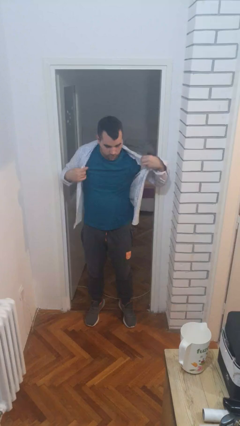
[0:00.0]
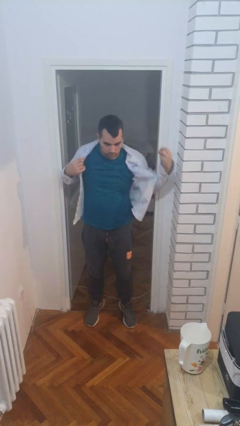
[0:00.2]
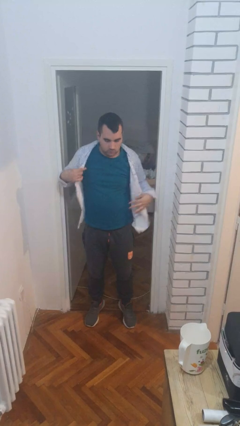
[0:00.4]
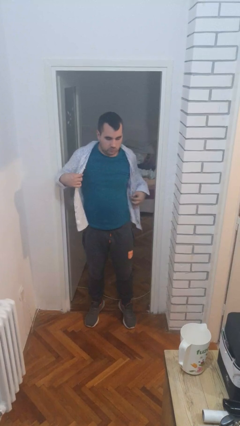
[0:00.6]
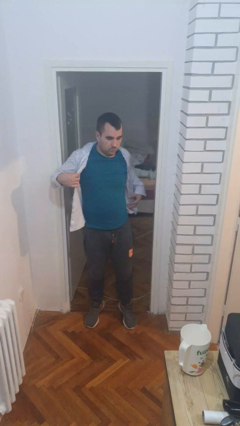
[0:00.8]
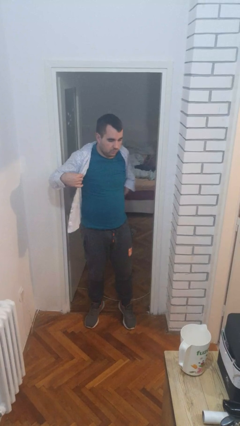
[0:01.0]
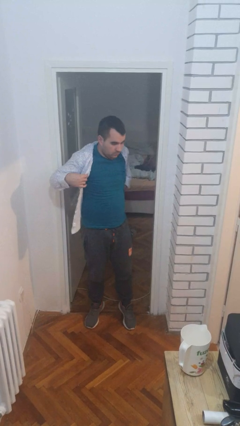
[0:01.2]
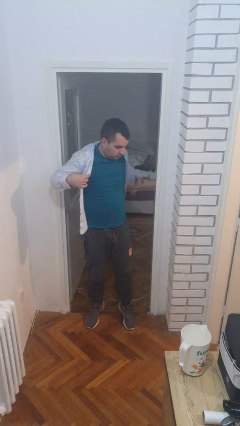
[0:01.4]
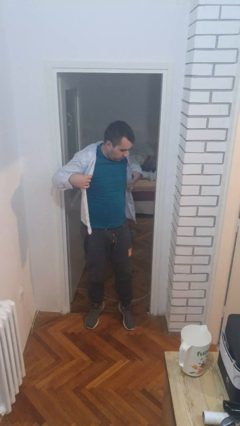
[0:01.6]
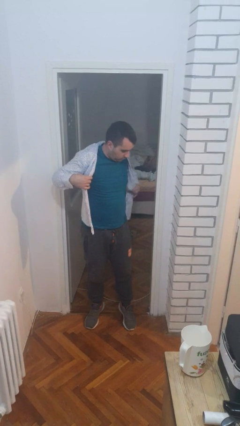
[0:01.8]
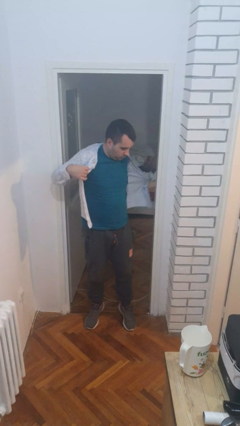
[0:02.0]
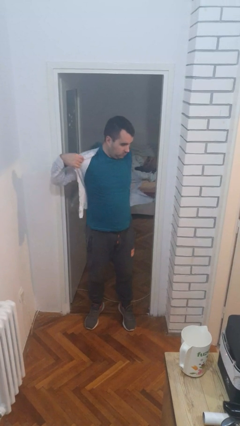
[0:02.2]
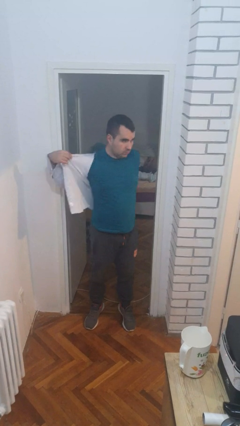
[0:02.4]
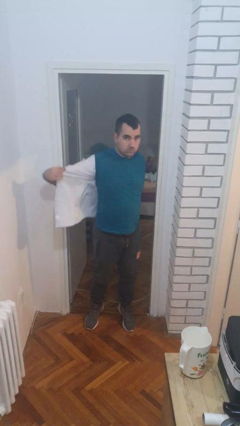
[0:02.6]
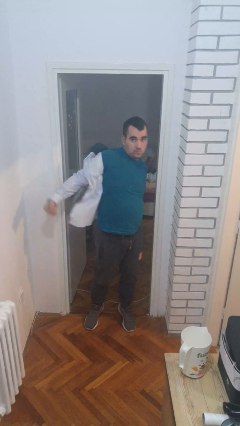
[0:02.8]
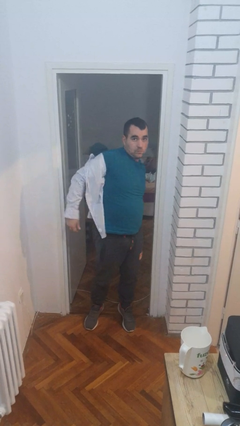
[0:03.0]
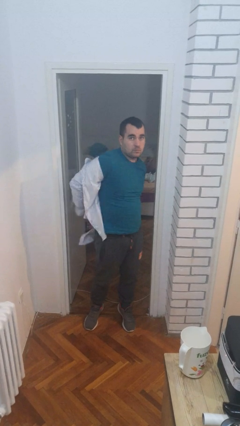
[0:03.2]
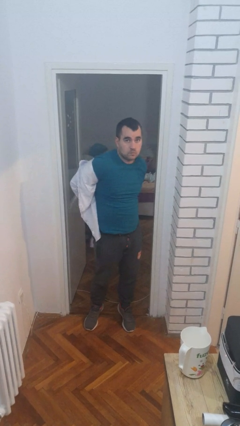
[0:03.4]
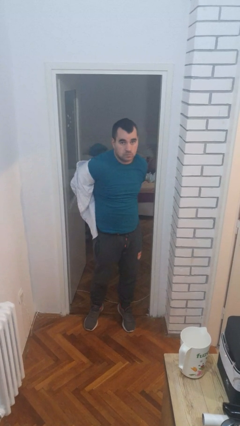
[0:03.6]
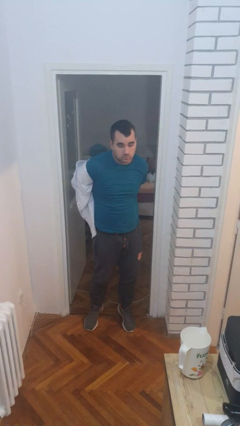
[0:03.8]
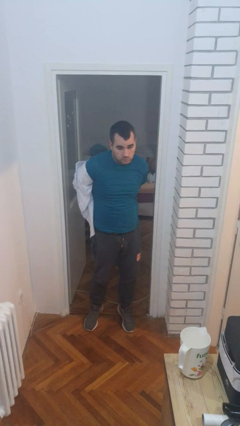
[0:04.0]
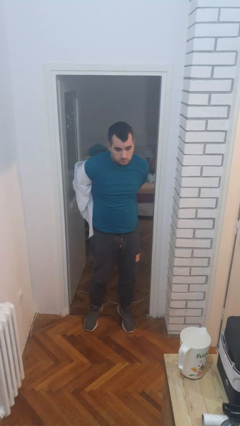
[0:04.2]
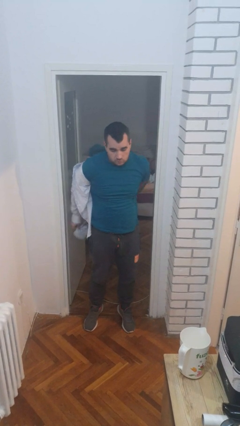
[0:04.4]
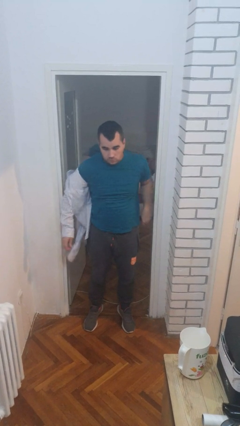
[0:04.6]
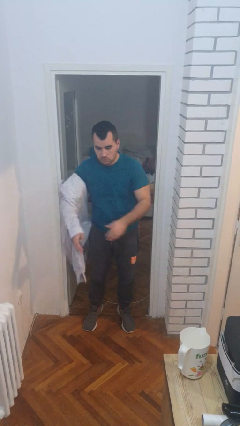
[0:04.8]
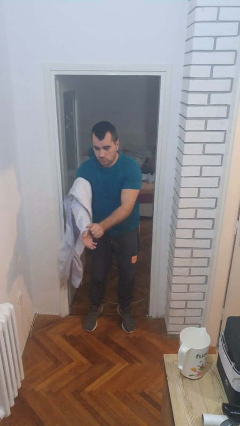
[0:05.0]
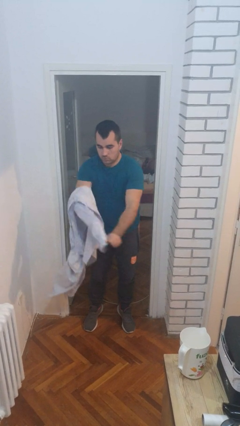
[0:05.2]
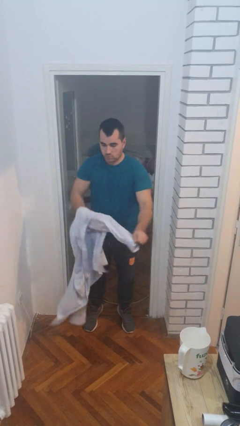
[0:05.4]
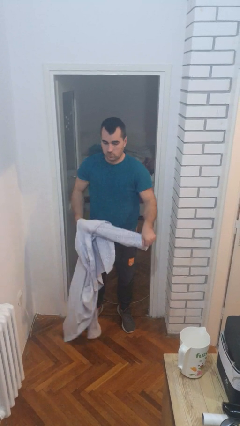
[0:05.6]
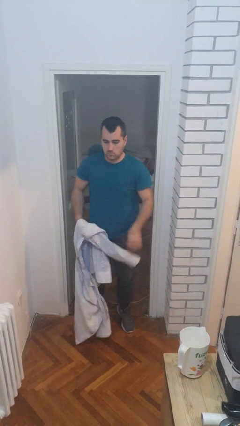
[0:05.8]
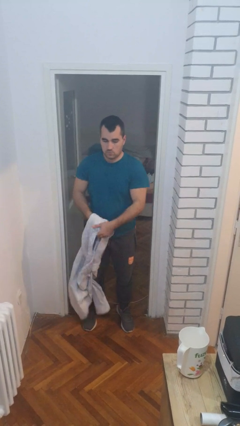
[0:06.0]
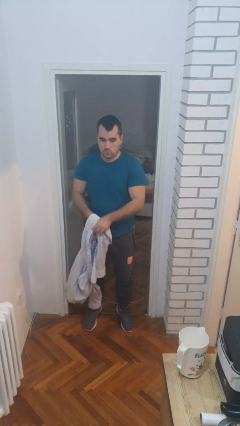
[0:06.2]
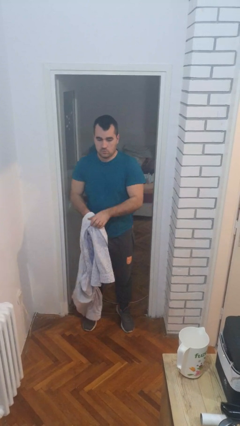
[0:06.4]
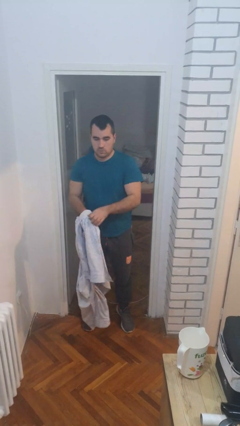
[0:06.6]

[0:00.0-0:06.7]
person takes off shirt

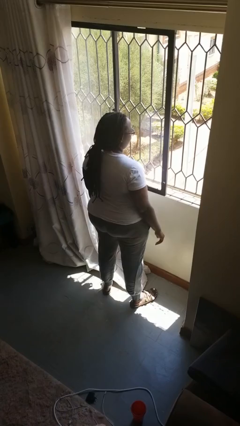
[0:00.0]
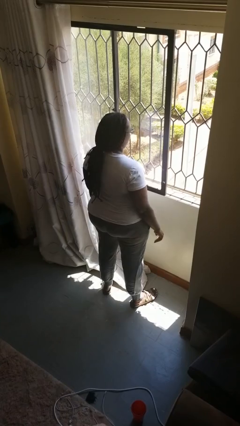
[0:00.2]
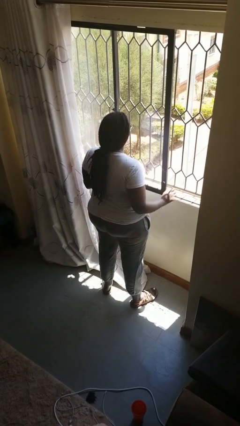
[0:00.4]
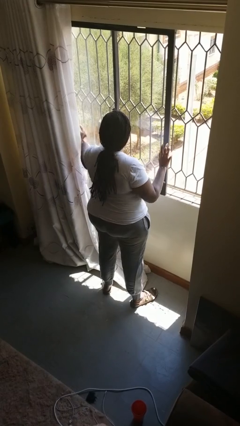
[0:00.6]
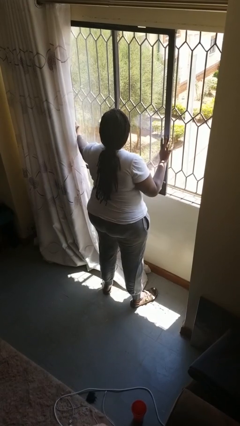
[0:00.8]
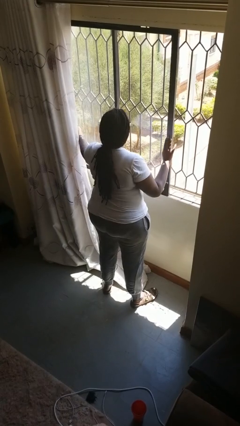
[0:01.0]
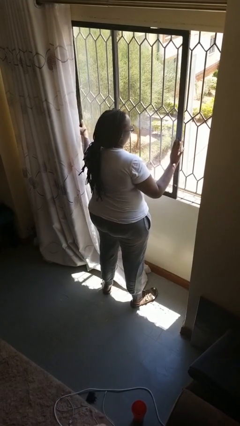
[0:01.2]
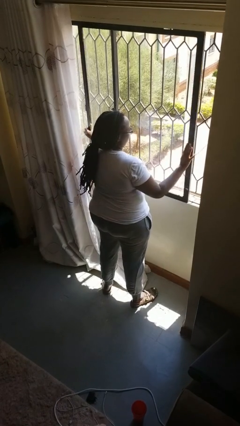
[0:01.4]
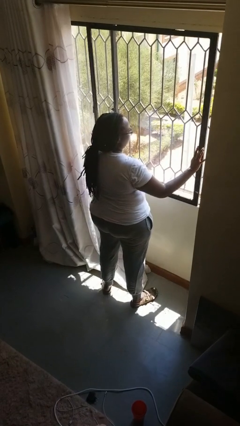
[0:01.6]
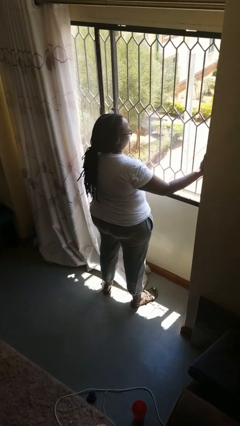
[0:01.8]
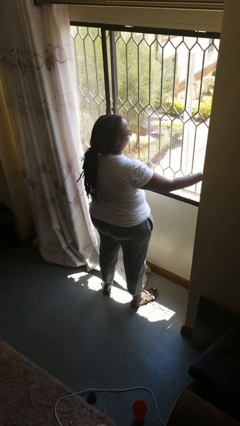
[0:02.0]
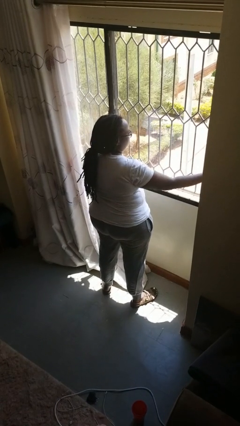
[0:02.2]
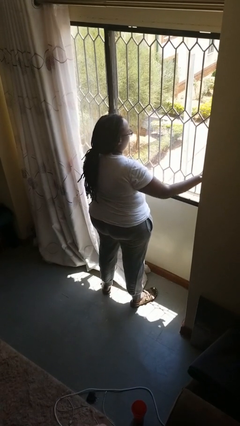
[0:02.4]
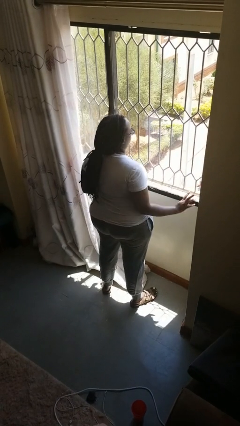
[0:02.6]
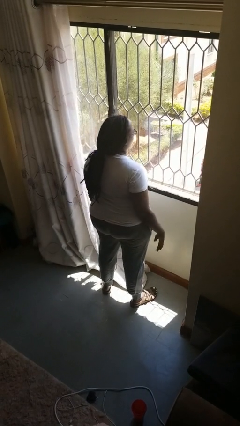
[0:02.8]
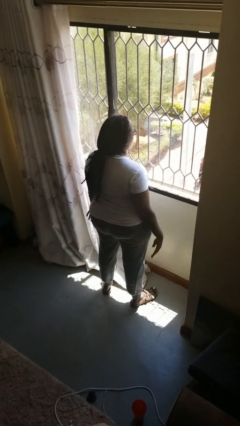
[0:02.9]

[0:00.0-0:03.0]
person closes home window

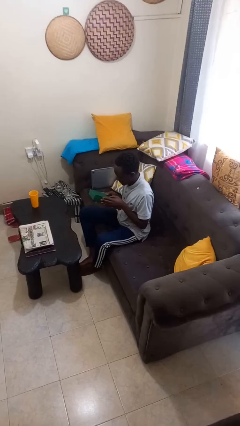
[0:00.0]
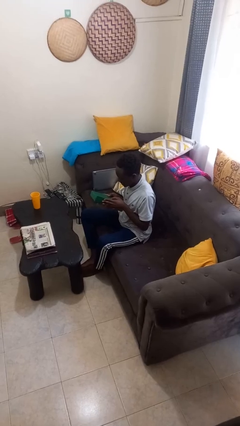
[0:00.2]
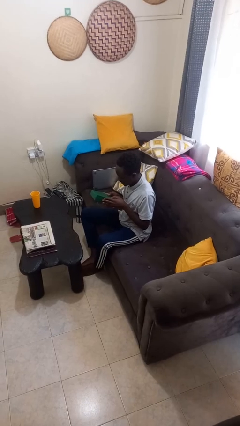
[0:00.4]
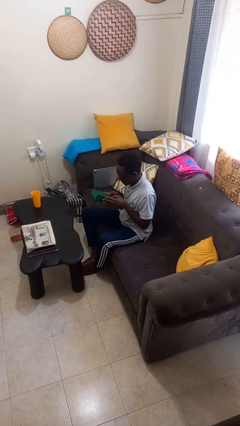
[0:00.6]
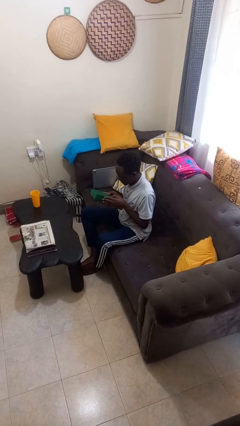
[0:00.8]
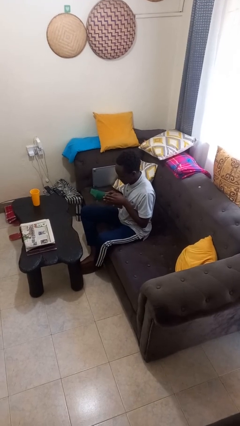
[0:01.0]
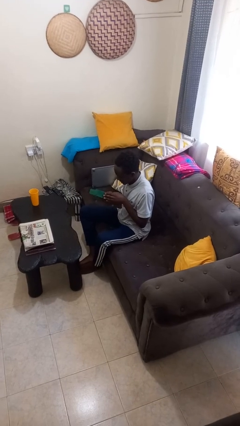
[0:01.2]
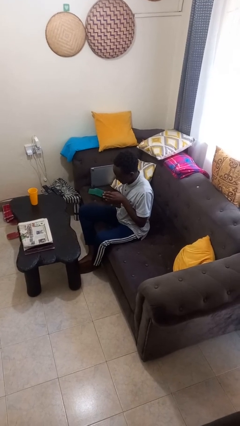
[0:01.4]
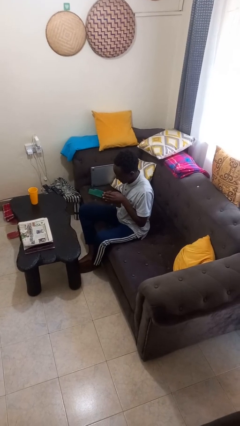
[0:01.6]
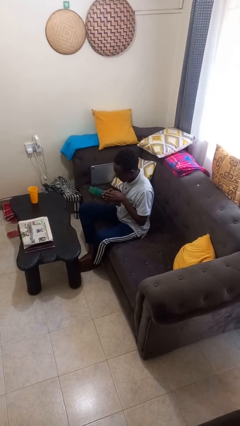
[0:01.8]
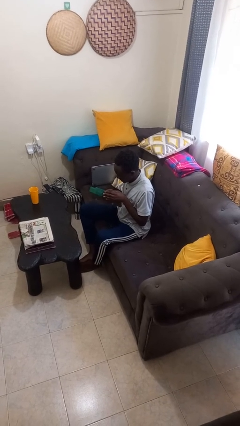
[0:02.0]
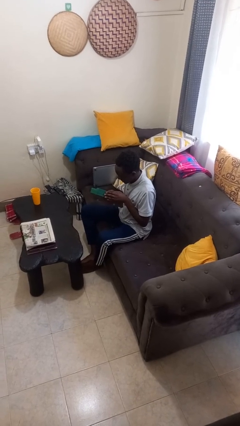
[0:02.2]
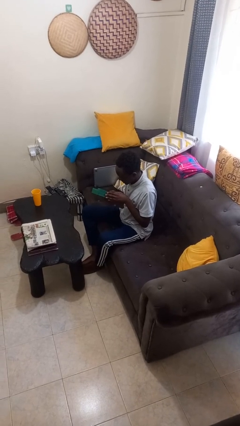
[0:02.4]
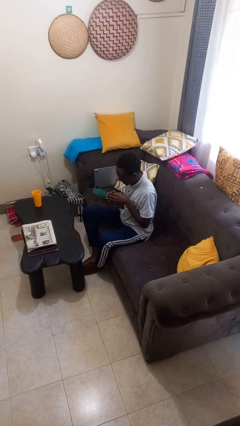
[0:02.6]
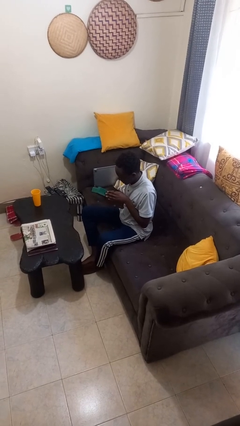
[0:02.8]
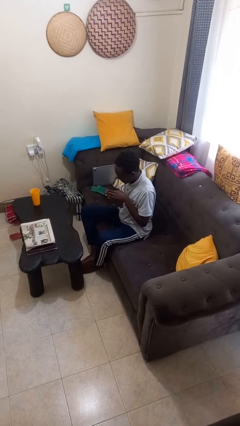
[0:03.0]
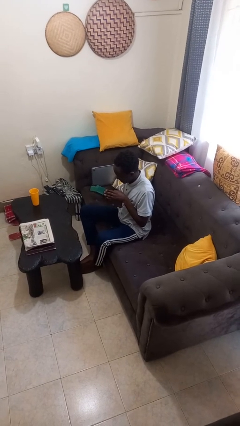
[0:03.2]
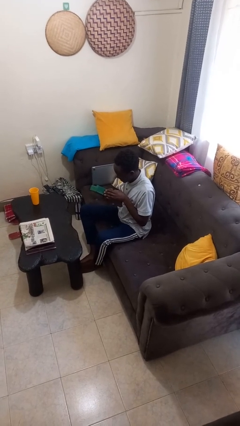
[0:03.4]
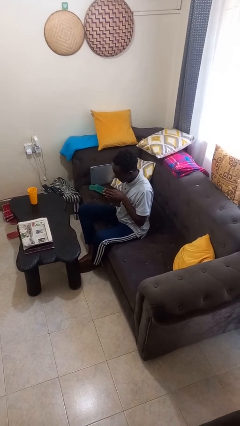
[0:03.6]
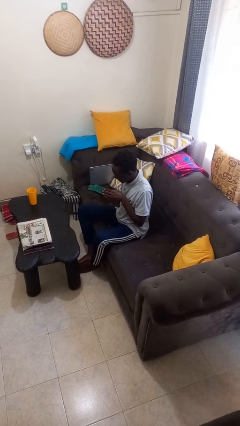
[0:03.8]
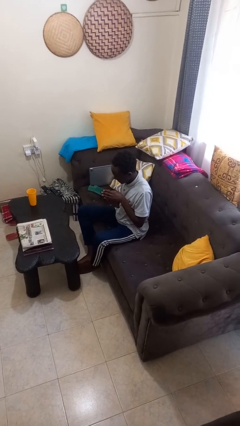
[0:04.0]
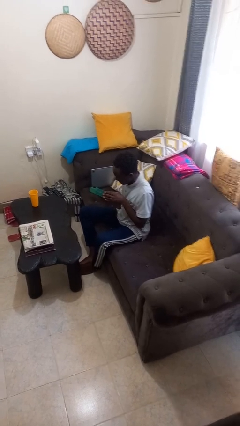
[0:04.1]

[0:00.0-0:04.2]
person interacts with handheld game

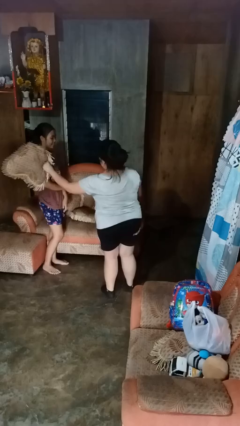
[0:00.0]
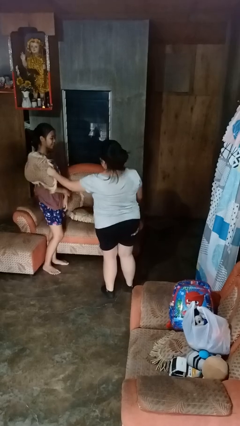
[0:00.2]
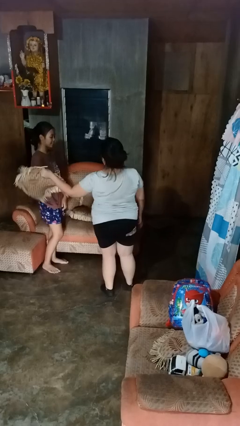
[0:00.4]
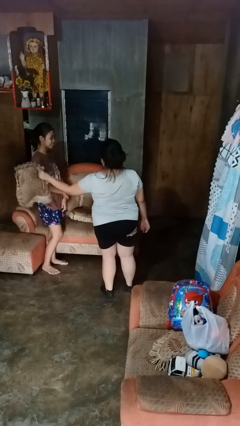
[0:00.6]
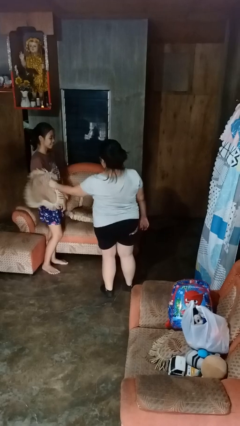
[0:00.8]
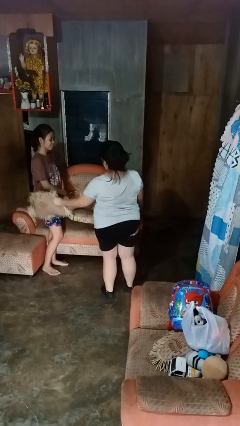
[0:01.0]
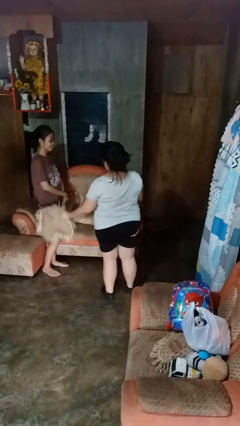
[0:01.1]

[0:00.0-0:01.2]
person hits person with pillow

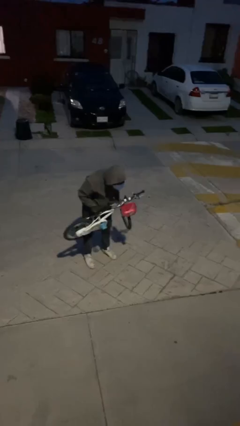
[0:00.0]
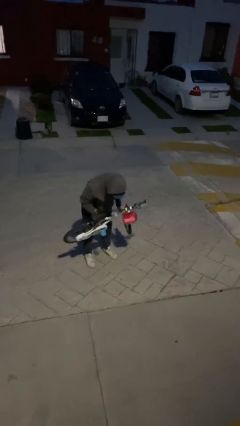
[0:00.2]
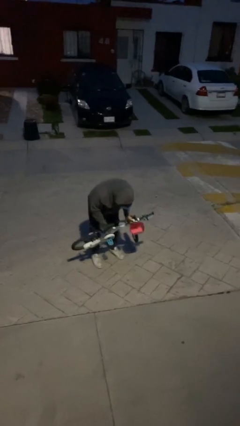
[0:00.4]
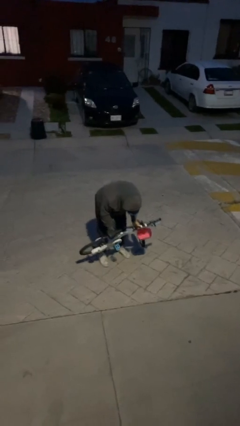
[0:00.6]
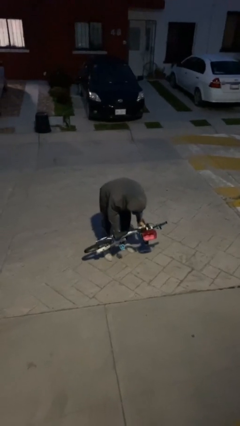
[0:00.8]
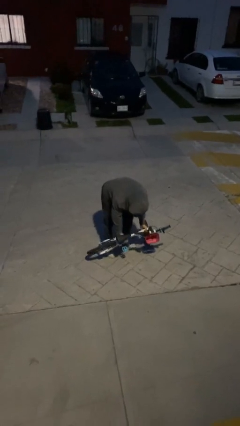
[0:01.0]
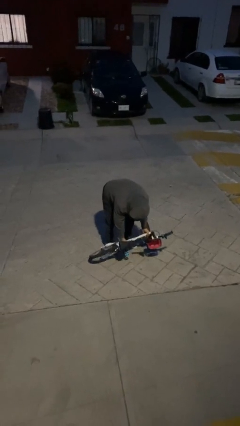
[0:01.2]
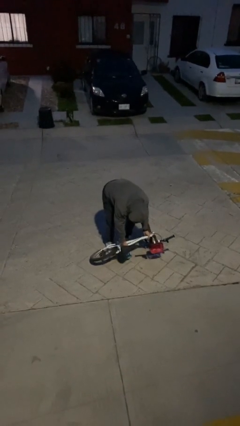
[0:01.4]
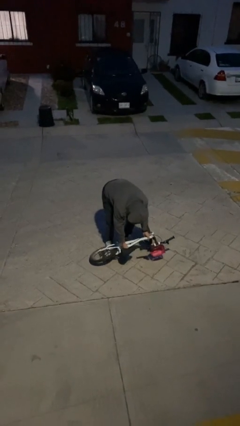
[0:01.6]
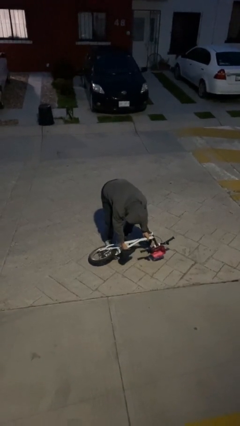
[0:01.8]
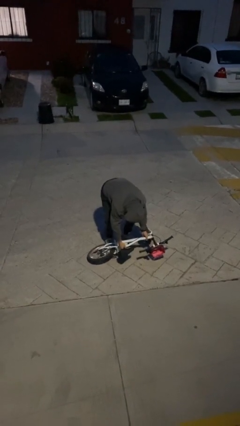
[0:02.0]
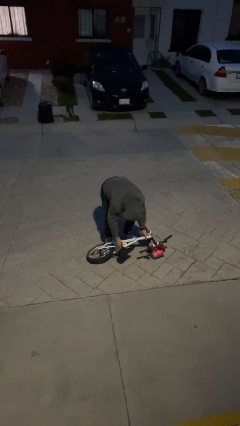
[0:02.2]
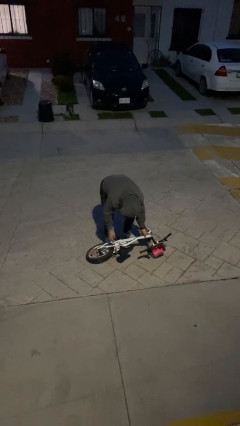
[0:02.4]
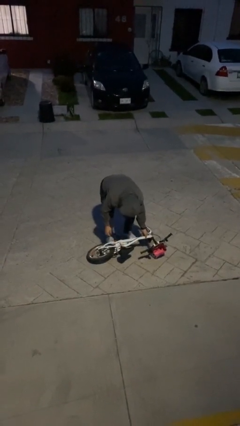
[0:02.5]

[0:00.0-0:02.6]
person puts down object on floor
